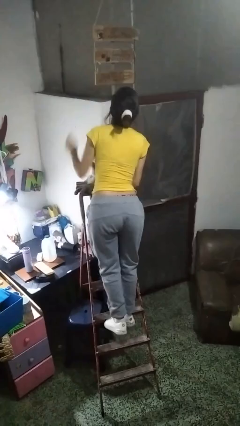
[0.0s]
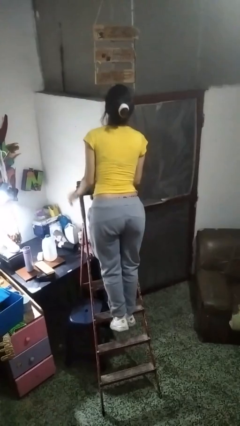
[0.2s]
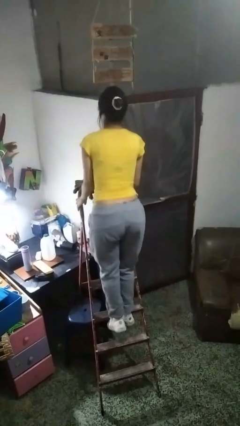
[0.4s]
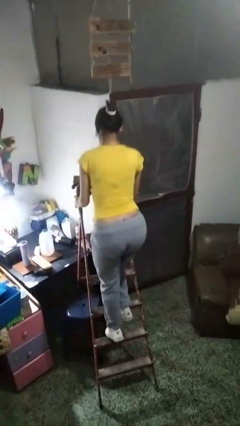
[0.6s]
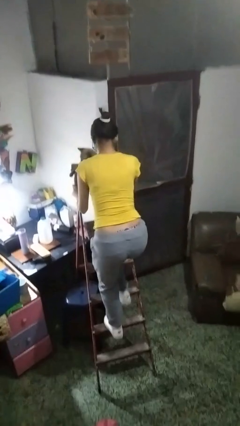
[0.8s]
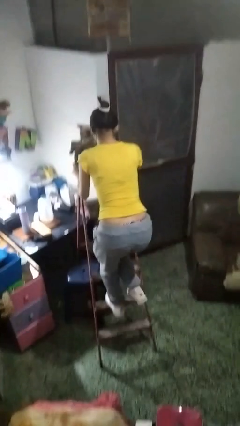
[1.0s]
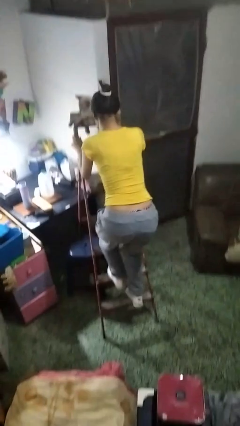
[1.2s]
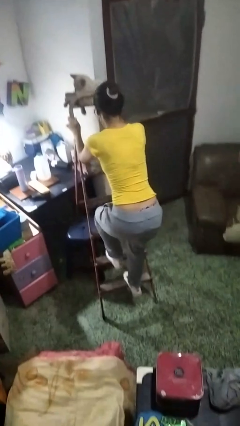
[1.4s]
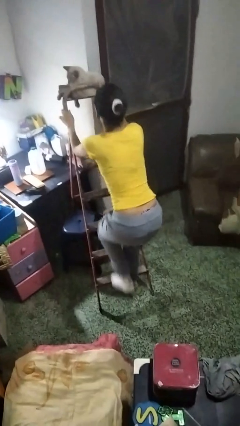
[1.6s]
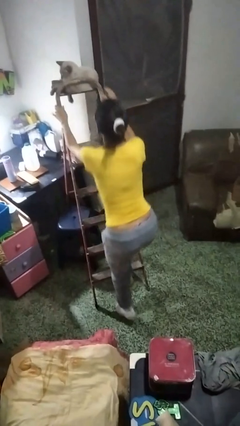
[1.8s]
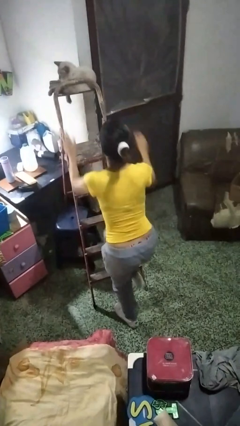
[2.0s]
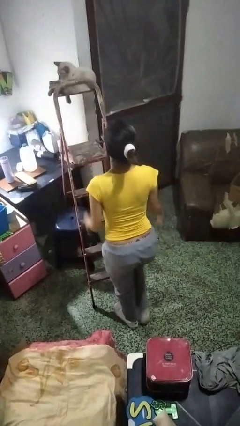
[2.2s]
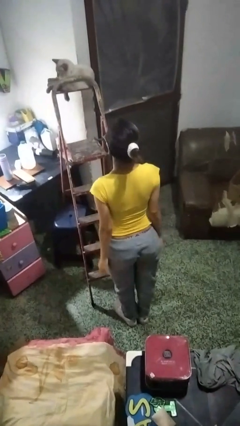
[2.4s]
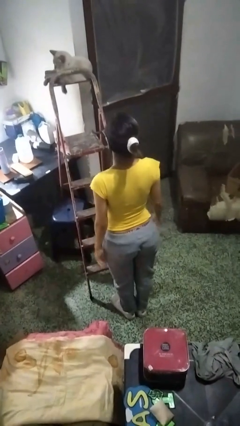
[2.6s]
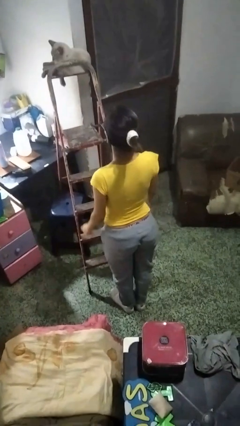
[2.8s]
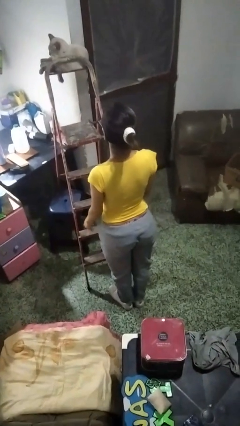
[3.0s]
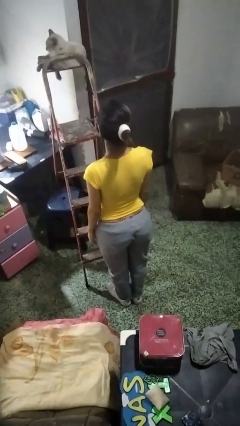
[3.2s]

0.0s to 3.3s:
person climbs down ladder

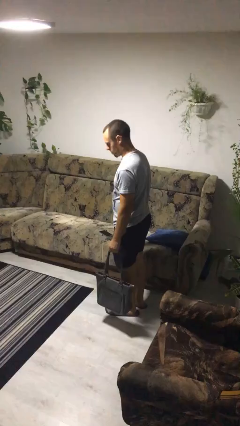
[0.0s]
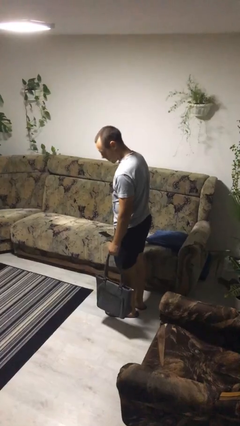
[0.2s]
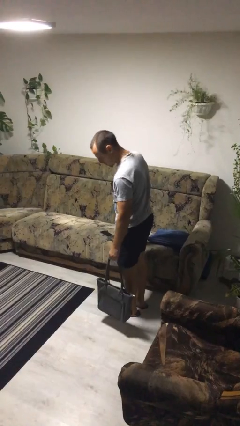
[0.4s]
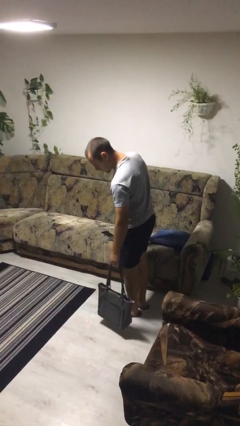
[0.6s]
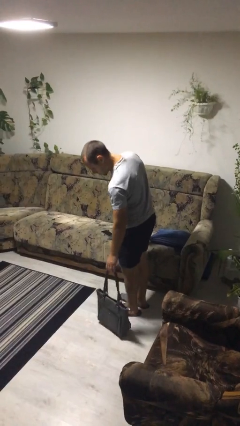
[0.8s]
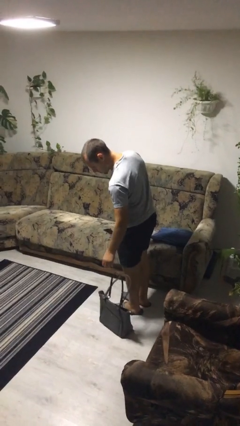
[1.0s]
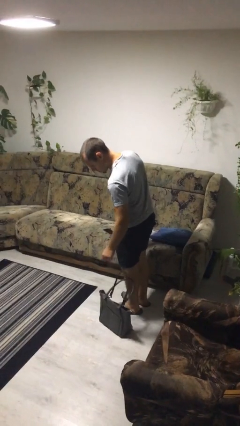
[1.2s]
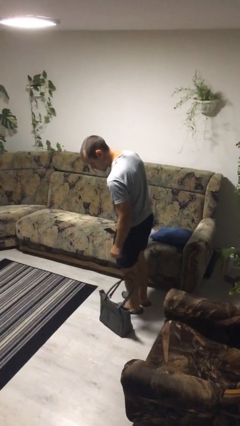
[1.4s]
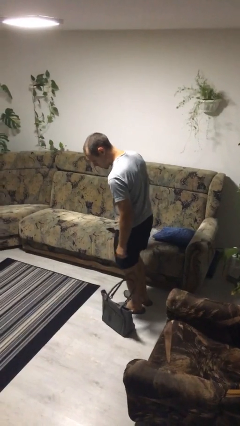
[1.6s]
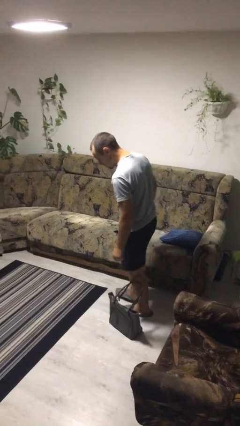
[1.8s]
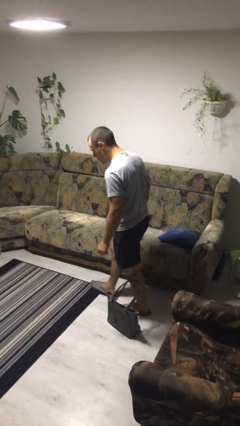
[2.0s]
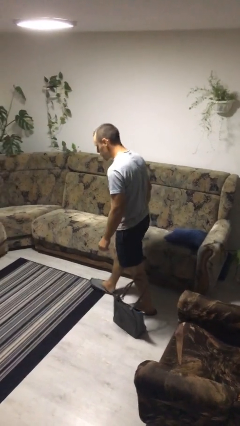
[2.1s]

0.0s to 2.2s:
person puts down object on floor

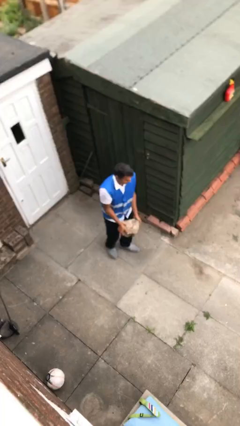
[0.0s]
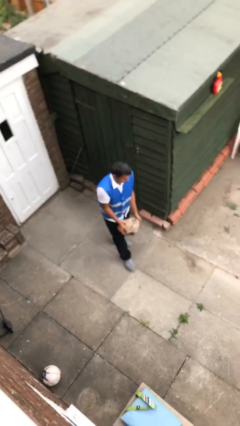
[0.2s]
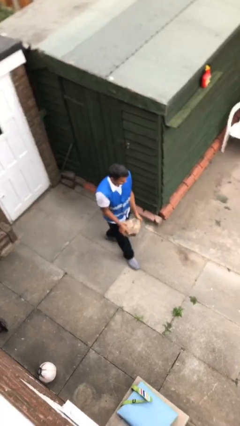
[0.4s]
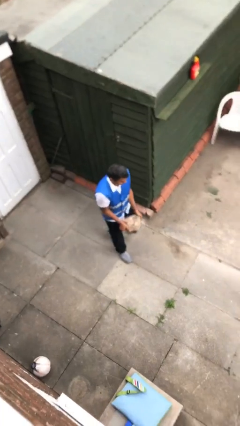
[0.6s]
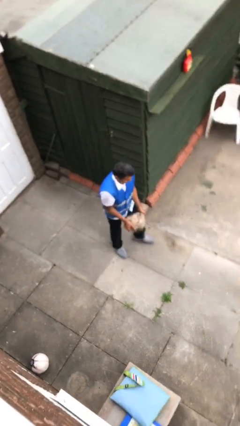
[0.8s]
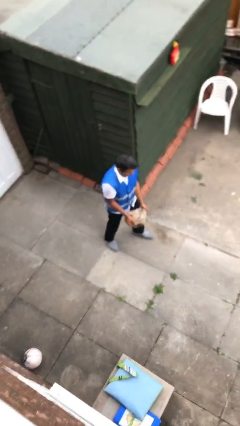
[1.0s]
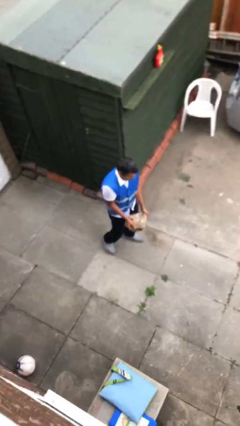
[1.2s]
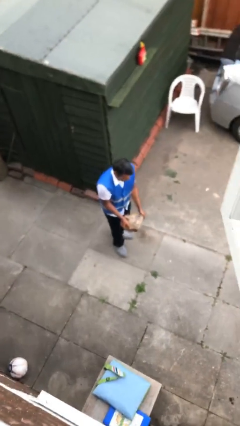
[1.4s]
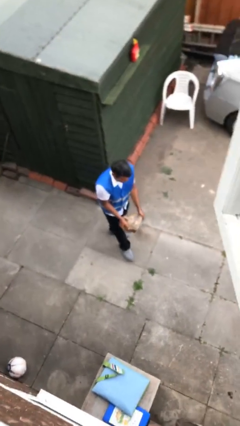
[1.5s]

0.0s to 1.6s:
person carries heavy object

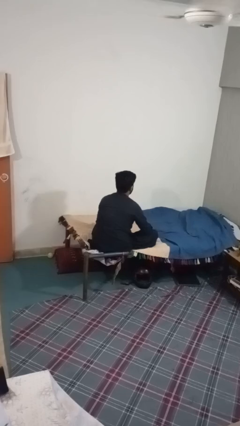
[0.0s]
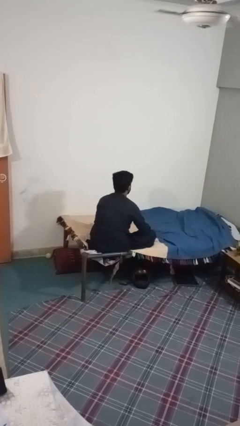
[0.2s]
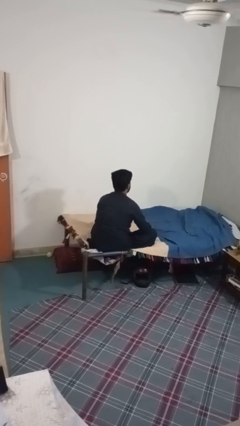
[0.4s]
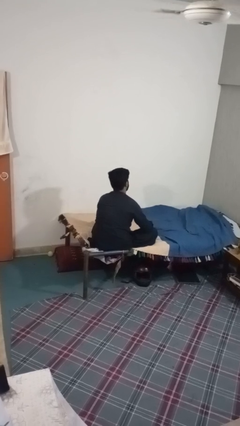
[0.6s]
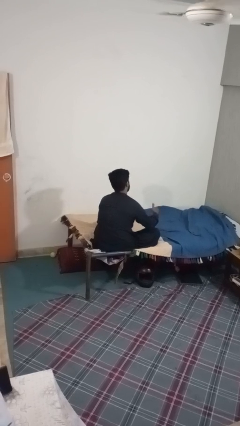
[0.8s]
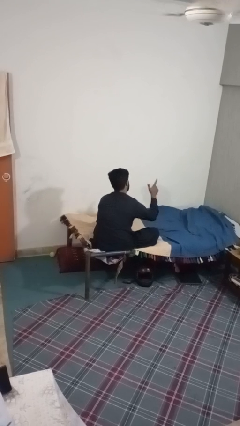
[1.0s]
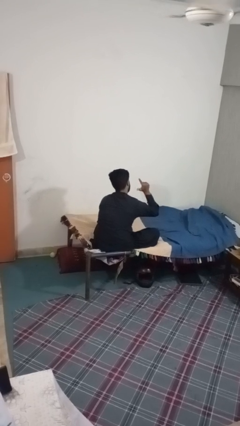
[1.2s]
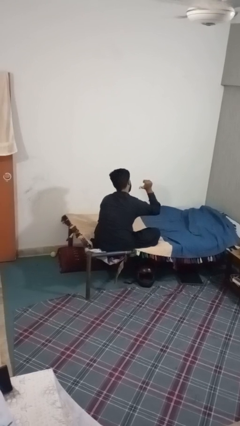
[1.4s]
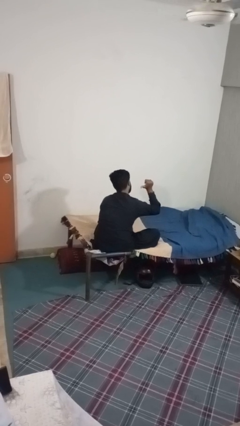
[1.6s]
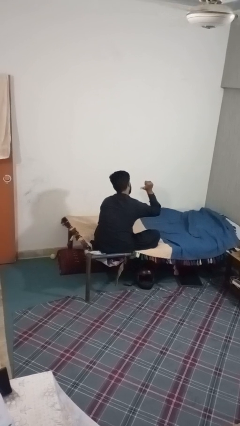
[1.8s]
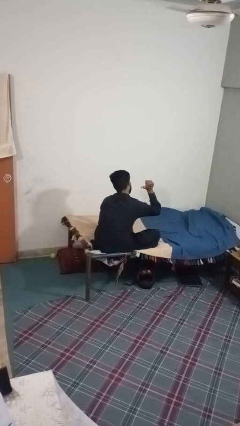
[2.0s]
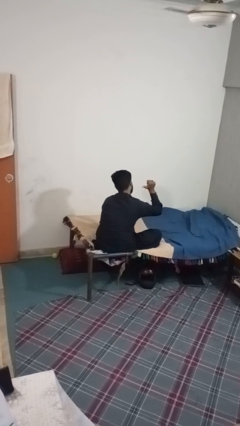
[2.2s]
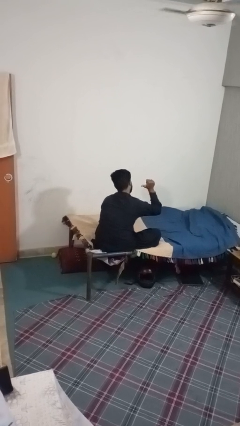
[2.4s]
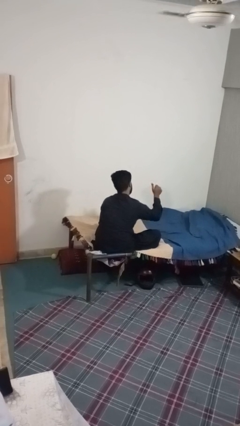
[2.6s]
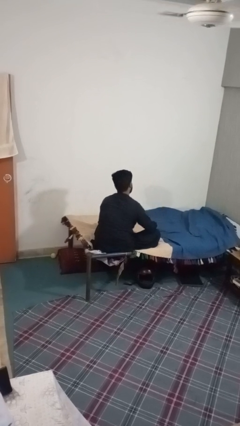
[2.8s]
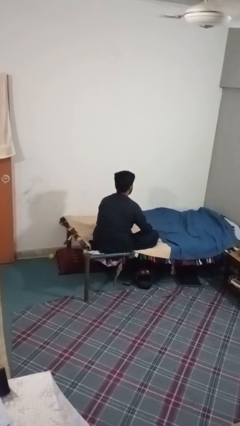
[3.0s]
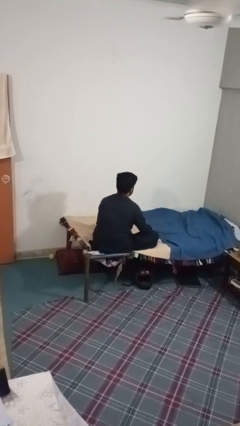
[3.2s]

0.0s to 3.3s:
person gestures behind me

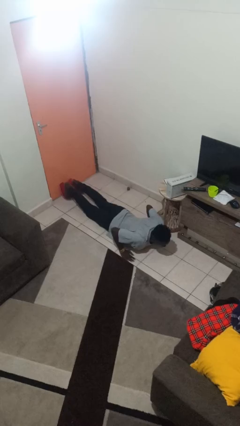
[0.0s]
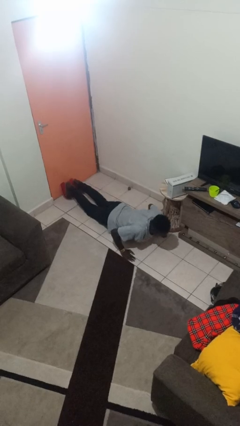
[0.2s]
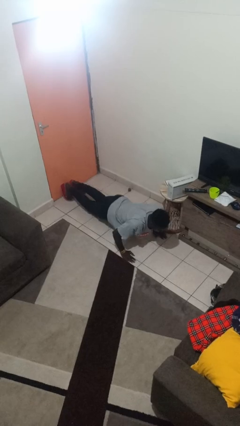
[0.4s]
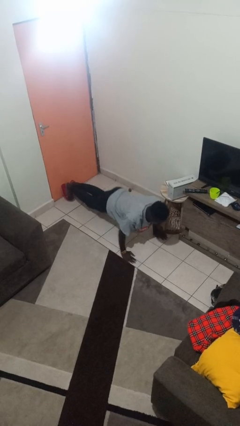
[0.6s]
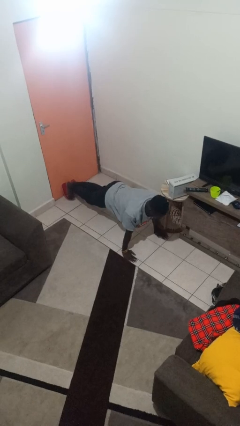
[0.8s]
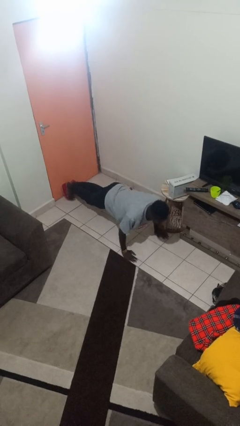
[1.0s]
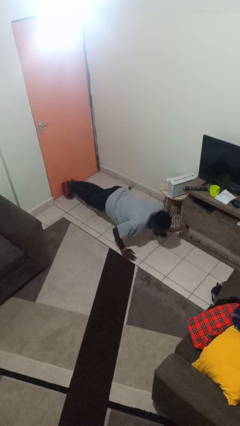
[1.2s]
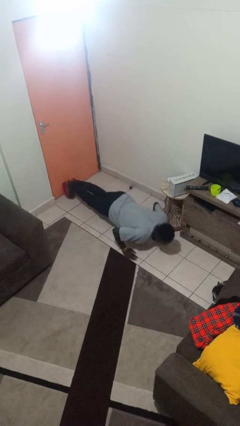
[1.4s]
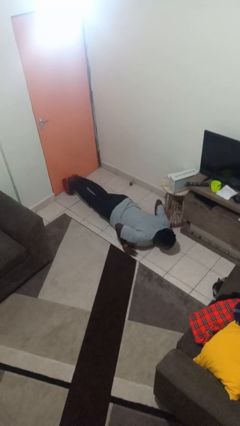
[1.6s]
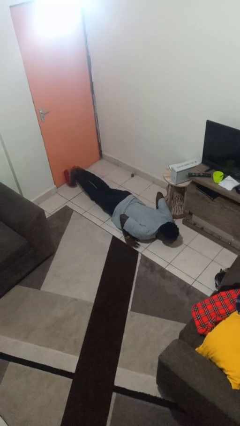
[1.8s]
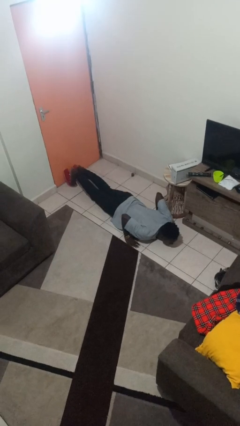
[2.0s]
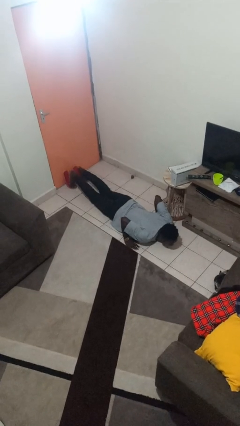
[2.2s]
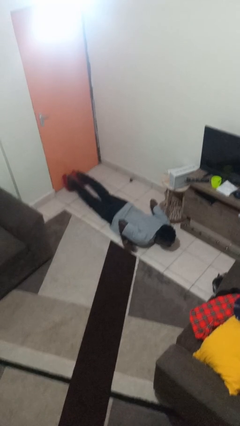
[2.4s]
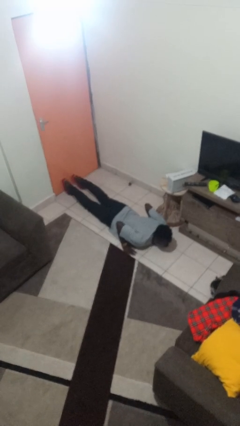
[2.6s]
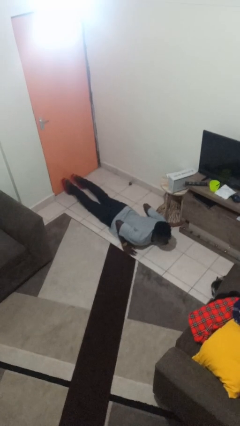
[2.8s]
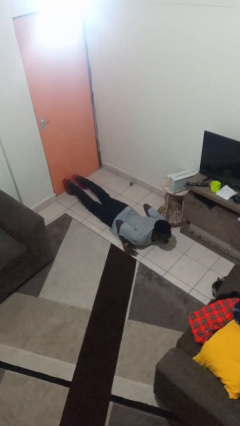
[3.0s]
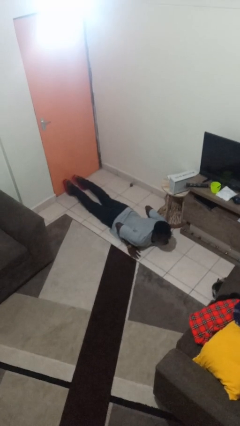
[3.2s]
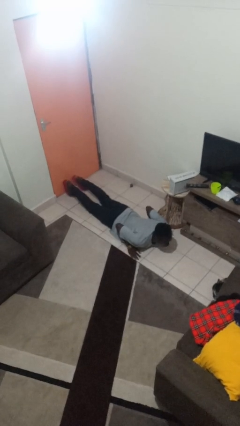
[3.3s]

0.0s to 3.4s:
person exercises with pushup

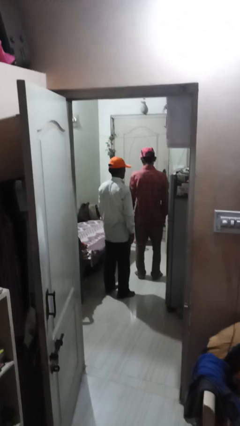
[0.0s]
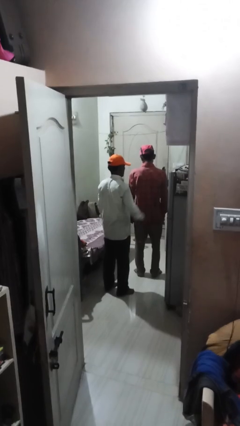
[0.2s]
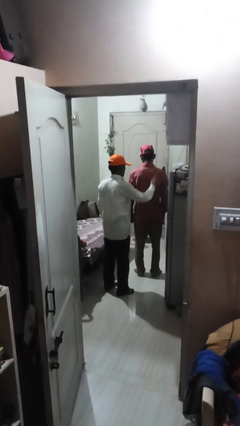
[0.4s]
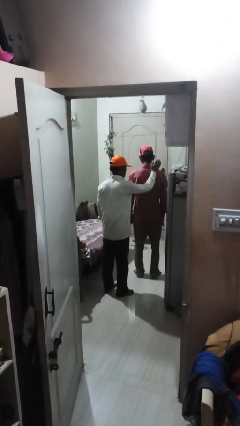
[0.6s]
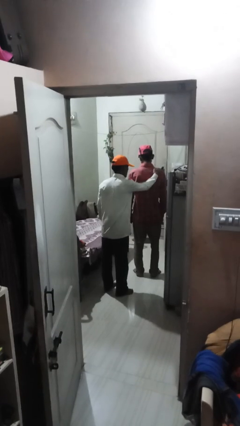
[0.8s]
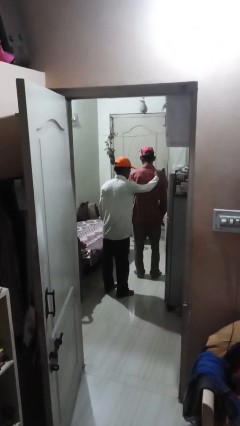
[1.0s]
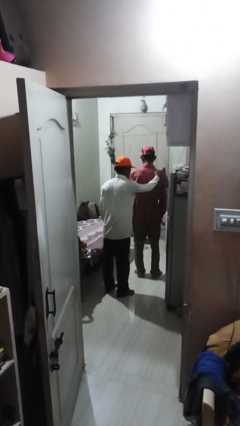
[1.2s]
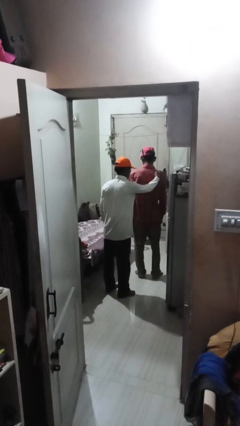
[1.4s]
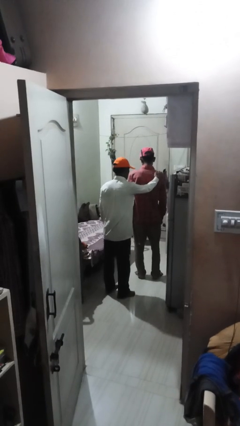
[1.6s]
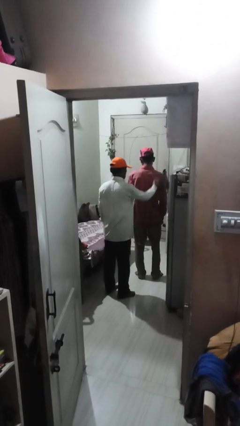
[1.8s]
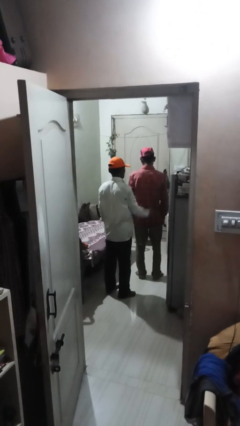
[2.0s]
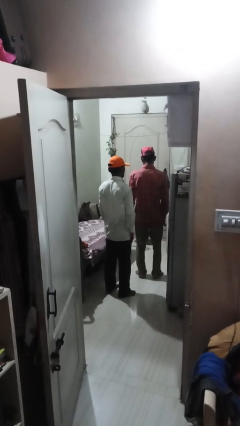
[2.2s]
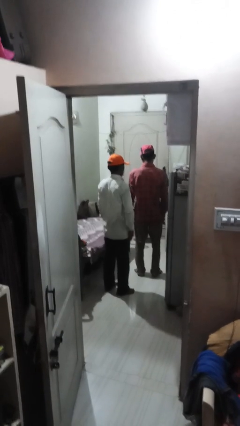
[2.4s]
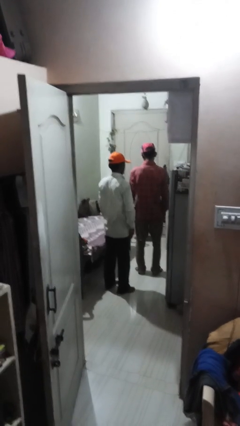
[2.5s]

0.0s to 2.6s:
person touches back of person

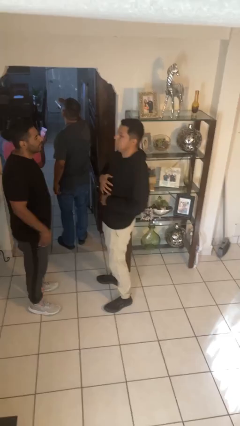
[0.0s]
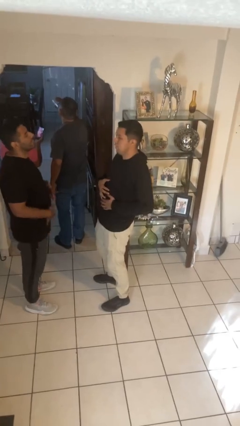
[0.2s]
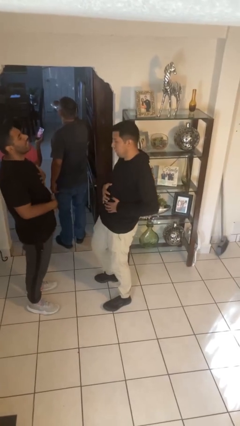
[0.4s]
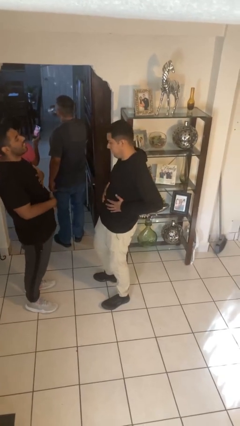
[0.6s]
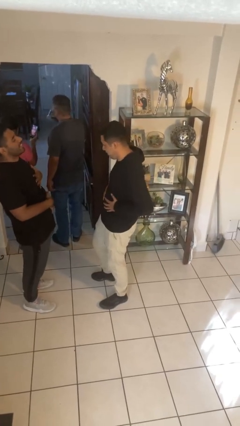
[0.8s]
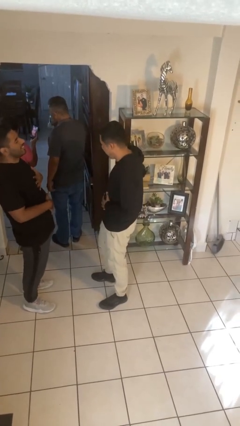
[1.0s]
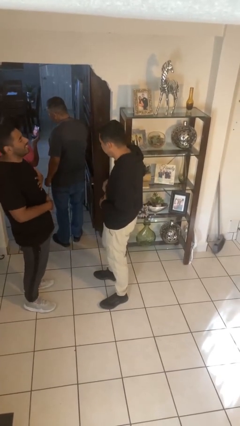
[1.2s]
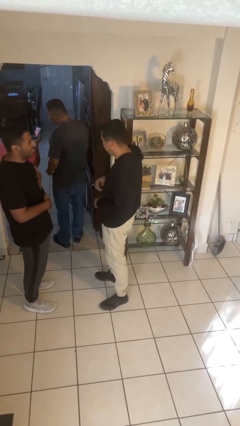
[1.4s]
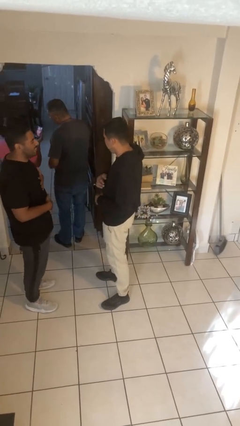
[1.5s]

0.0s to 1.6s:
person laughs with person
